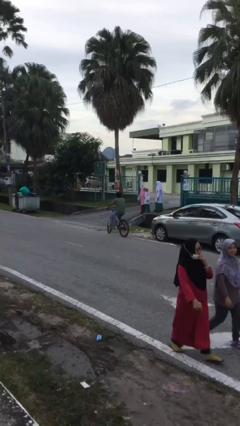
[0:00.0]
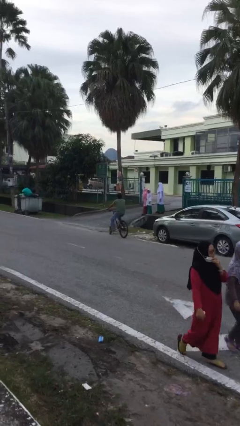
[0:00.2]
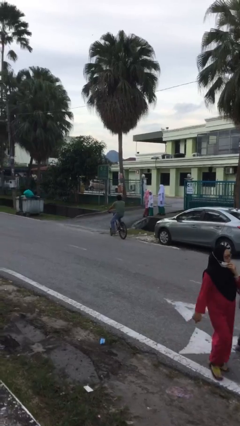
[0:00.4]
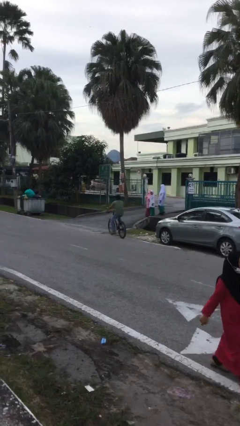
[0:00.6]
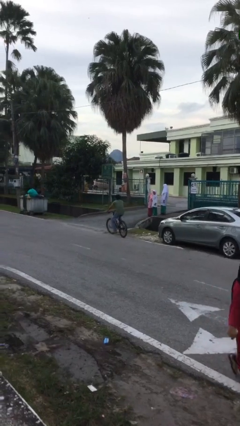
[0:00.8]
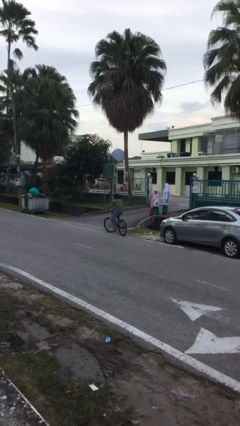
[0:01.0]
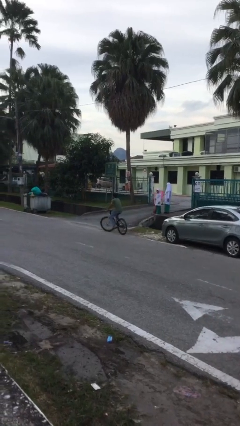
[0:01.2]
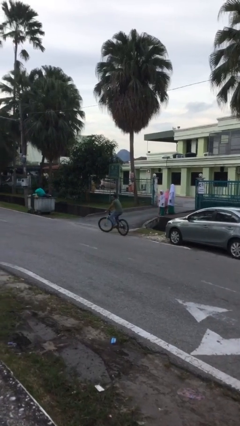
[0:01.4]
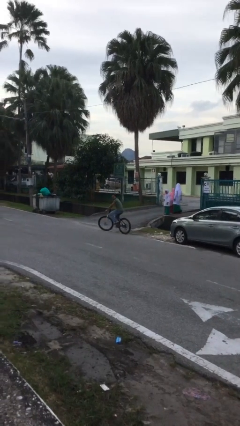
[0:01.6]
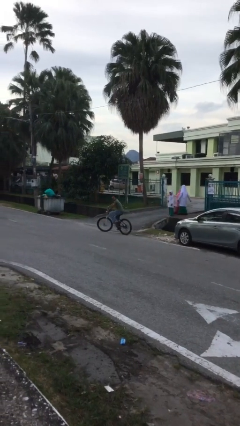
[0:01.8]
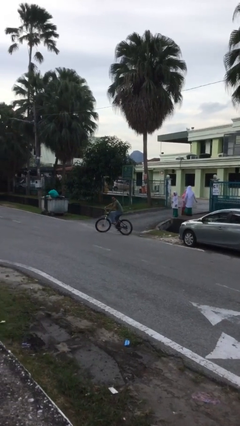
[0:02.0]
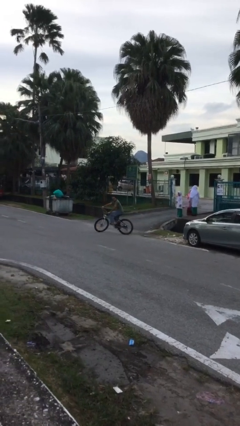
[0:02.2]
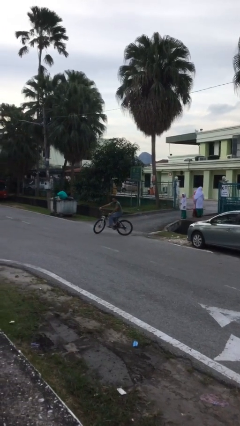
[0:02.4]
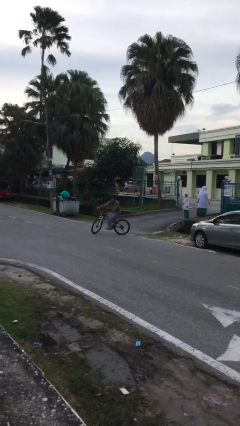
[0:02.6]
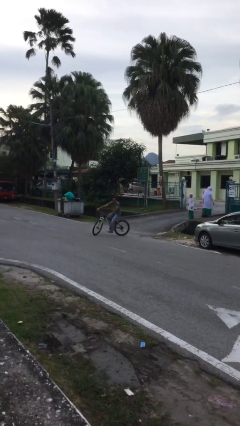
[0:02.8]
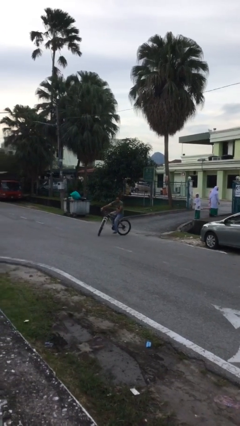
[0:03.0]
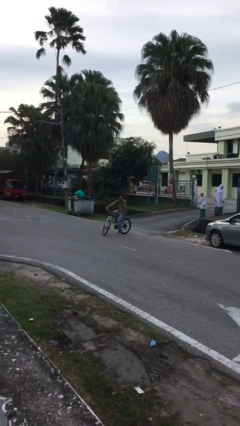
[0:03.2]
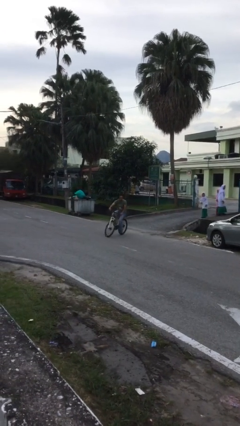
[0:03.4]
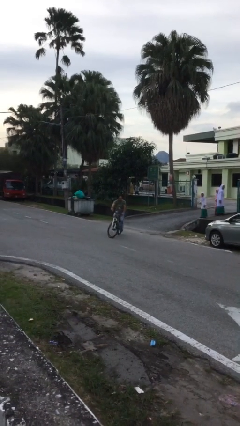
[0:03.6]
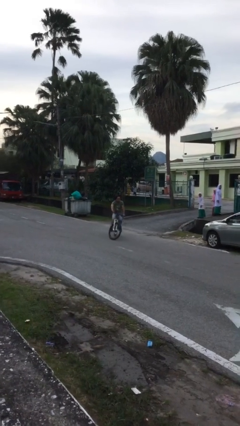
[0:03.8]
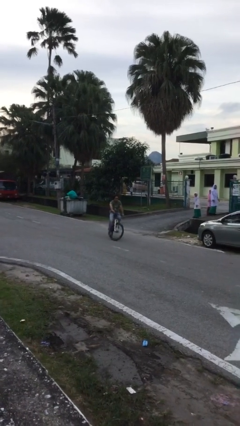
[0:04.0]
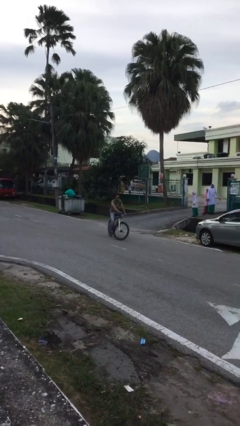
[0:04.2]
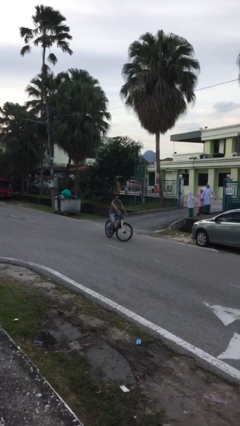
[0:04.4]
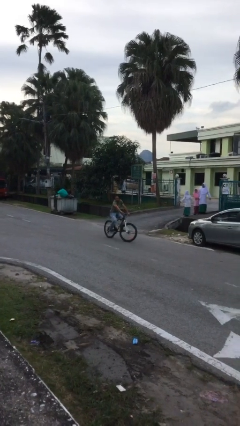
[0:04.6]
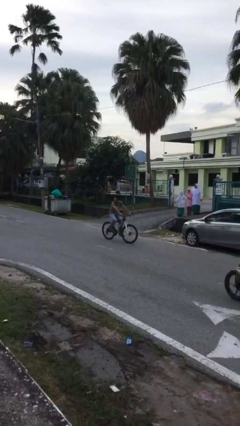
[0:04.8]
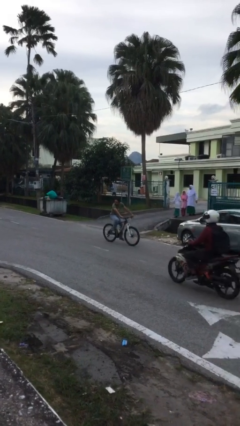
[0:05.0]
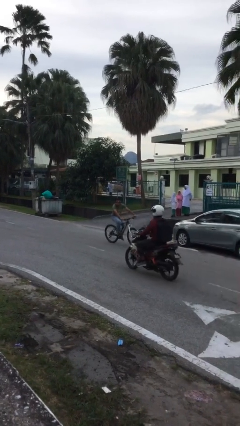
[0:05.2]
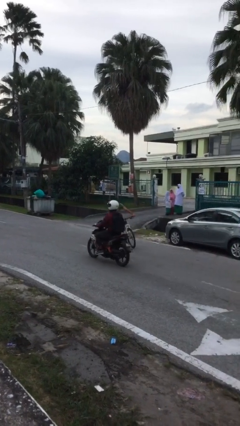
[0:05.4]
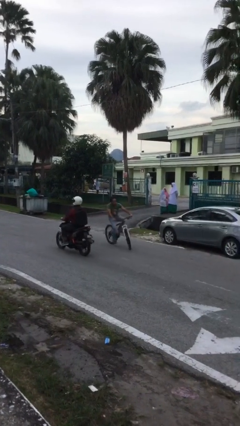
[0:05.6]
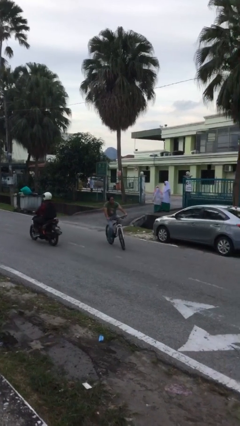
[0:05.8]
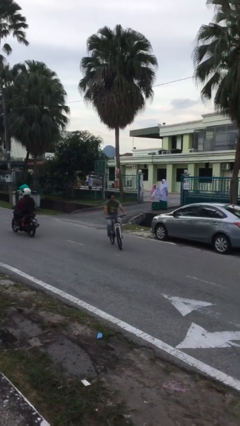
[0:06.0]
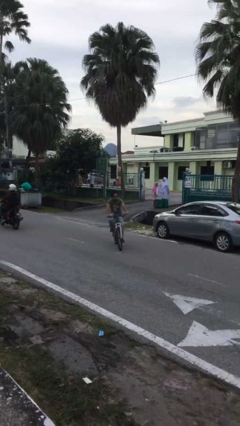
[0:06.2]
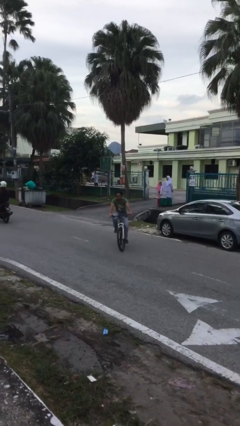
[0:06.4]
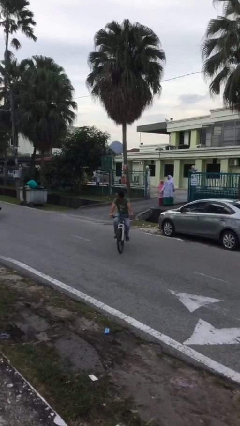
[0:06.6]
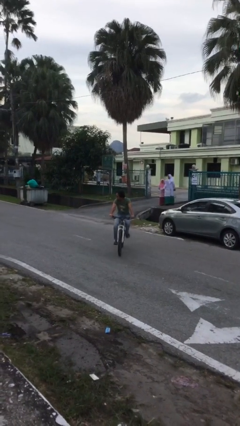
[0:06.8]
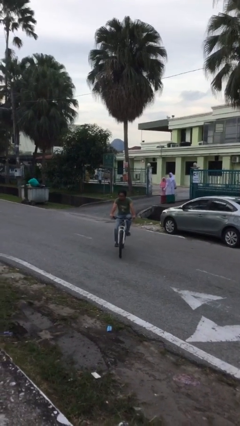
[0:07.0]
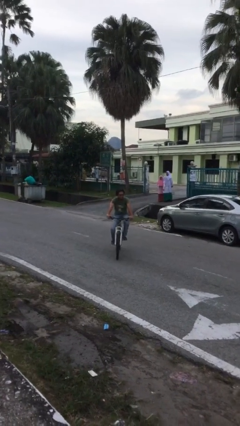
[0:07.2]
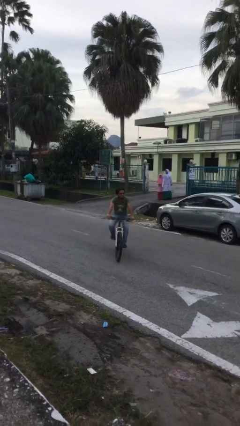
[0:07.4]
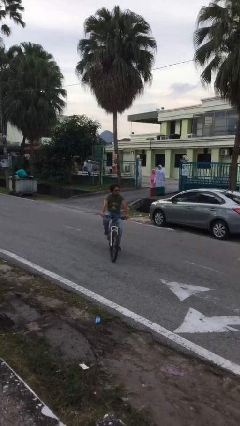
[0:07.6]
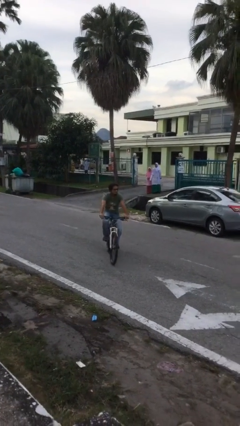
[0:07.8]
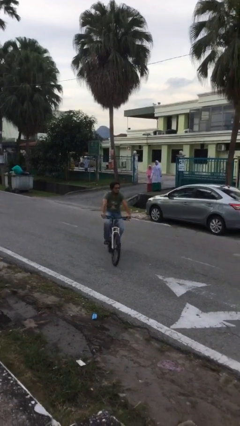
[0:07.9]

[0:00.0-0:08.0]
person rides bicycle

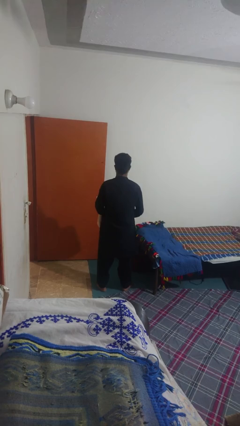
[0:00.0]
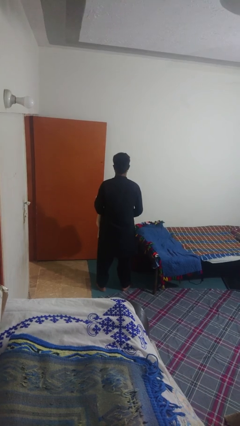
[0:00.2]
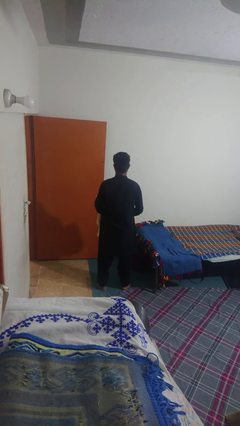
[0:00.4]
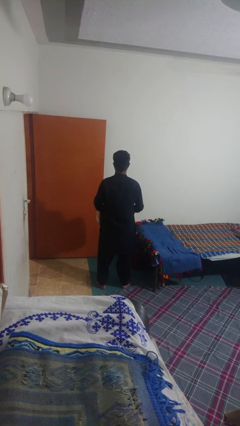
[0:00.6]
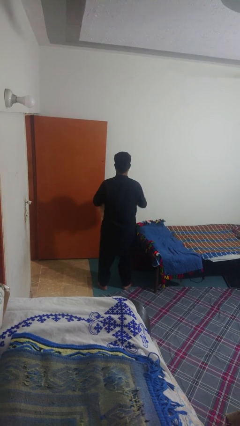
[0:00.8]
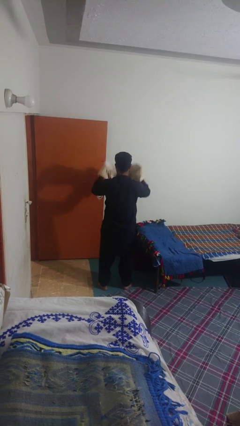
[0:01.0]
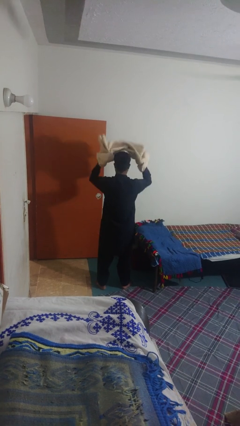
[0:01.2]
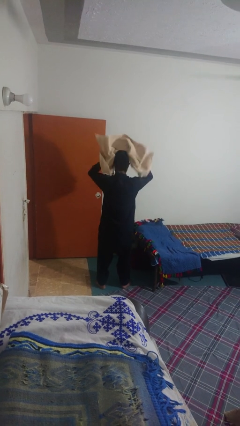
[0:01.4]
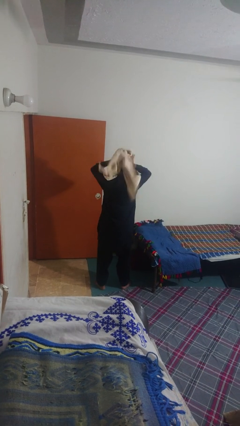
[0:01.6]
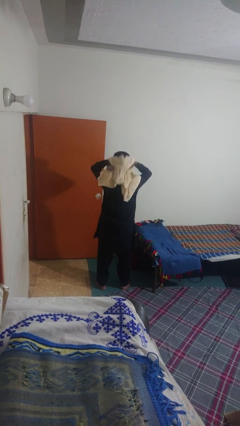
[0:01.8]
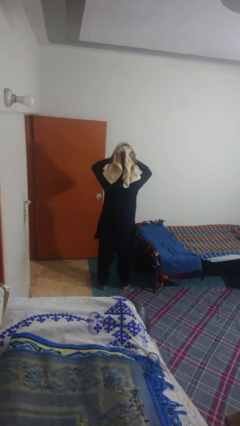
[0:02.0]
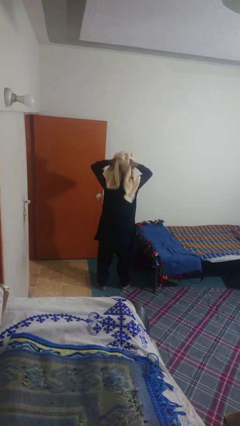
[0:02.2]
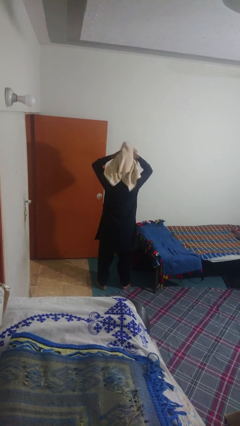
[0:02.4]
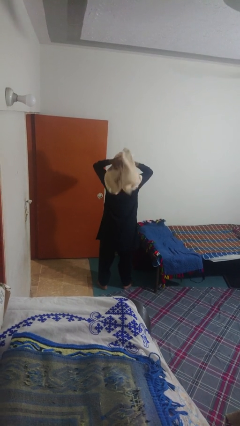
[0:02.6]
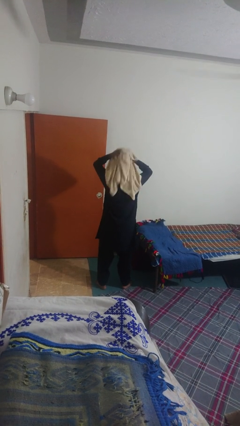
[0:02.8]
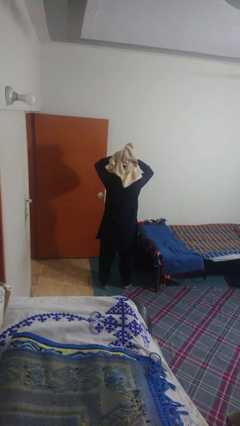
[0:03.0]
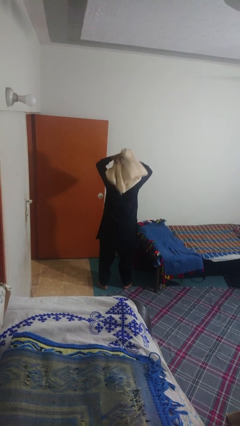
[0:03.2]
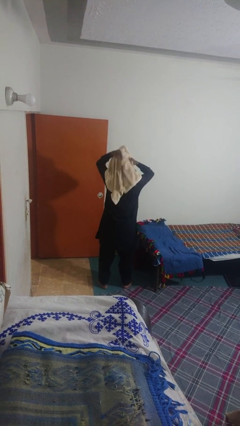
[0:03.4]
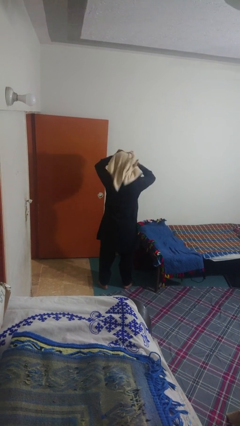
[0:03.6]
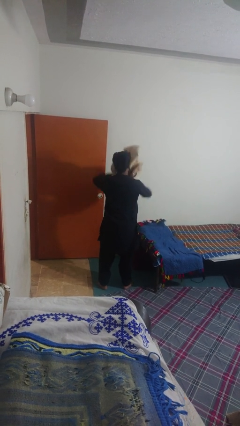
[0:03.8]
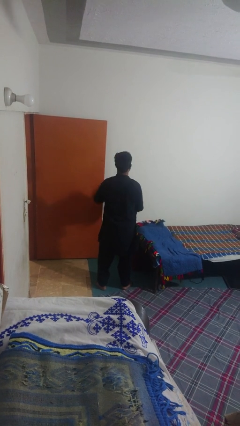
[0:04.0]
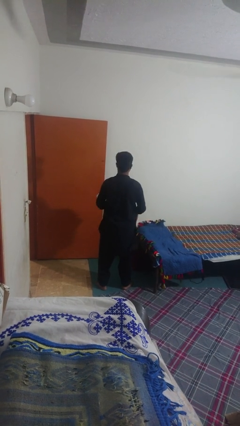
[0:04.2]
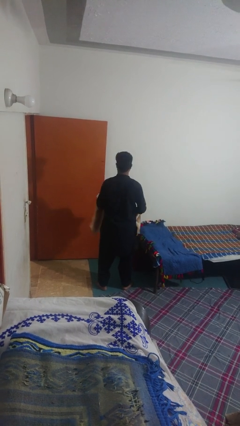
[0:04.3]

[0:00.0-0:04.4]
person dries hair with towel

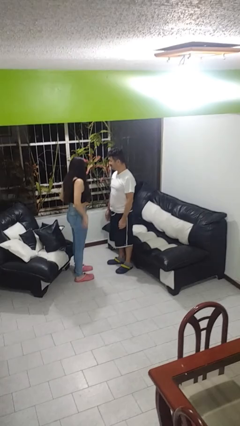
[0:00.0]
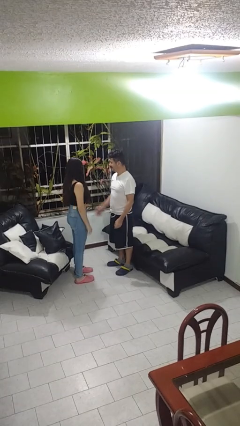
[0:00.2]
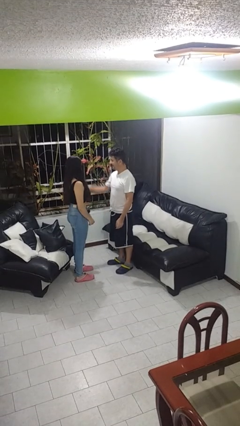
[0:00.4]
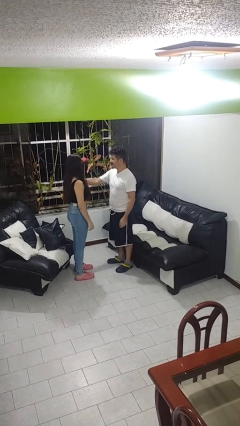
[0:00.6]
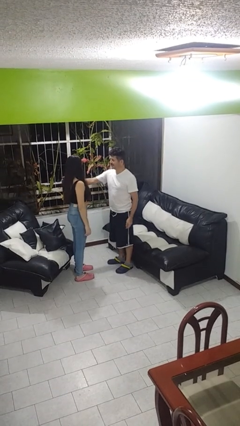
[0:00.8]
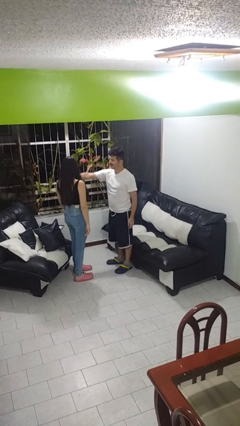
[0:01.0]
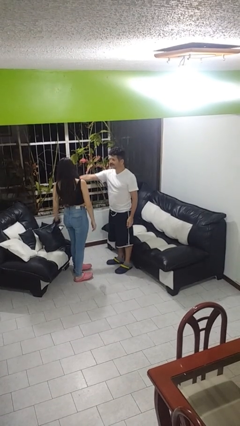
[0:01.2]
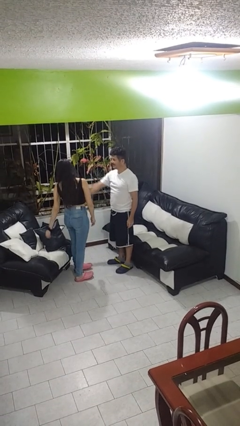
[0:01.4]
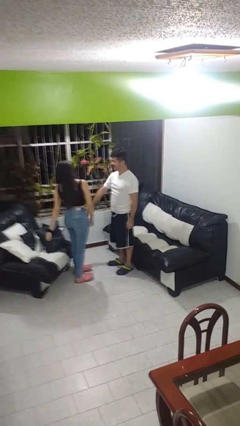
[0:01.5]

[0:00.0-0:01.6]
person shoves person

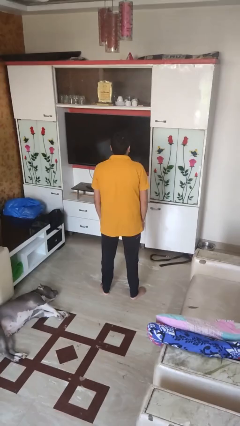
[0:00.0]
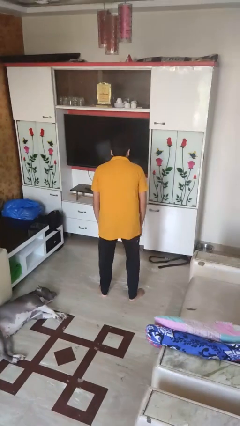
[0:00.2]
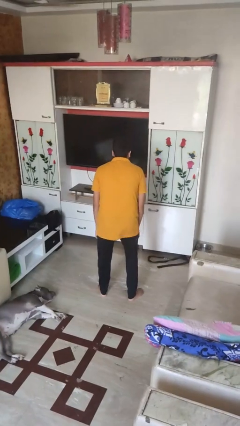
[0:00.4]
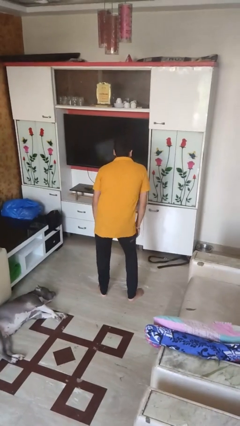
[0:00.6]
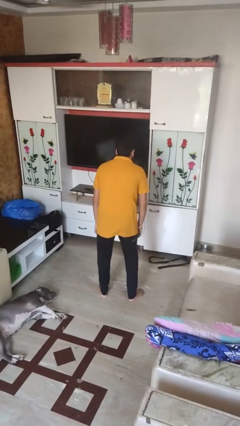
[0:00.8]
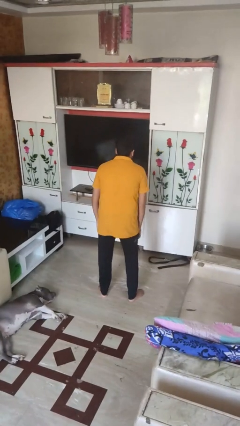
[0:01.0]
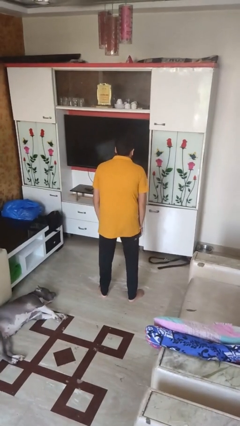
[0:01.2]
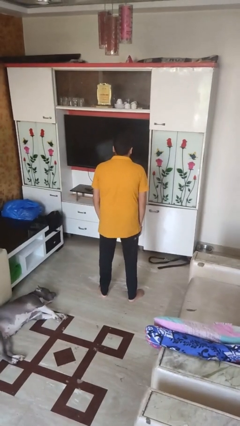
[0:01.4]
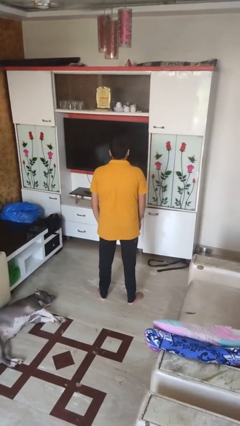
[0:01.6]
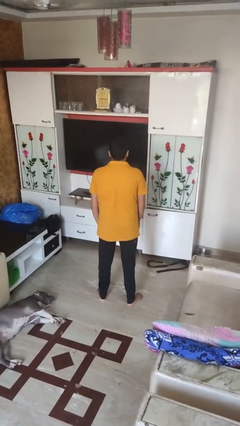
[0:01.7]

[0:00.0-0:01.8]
person wiggles hips

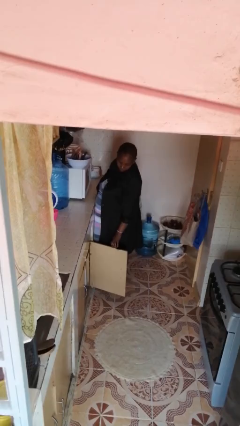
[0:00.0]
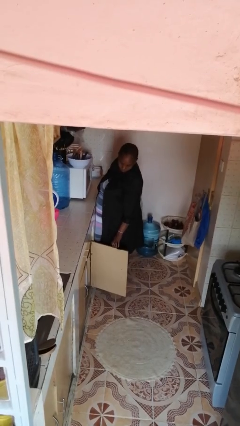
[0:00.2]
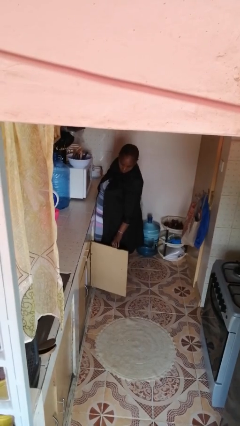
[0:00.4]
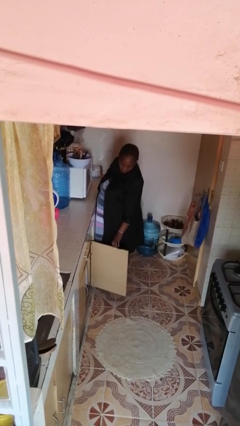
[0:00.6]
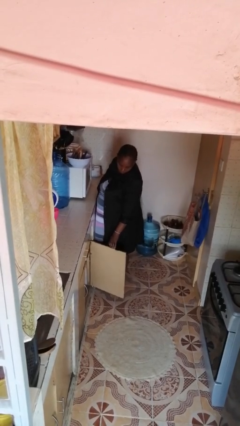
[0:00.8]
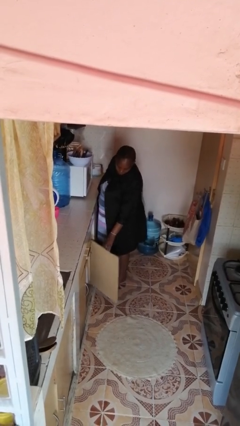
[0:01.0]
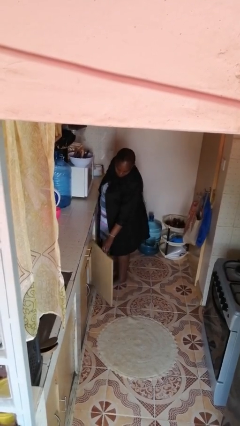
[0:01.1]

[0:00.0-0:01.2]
person closes cabinet

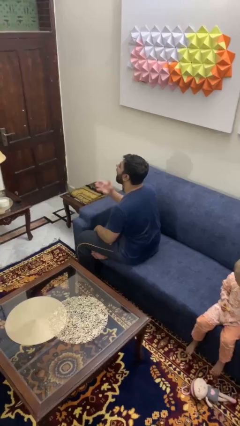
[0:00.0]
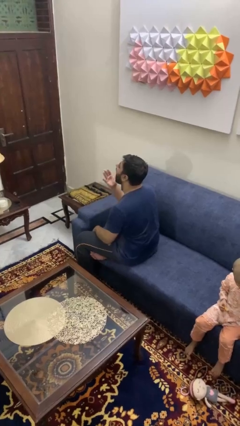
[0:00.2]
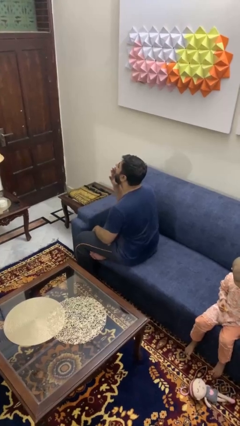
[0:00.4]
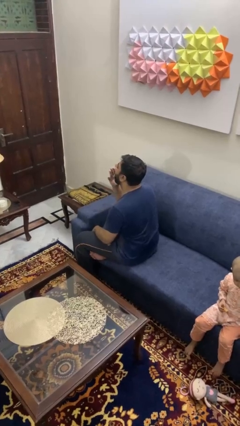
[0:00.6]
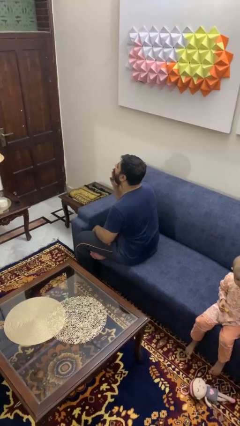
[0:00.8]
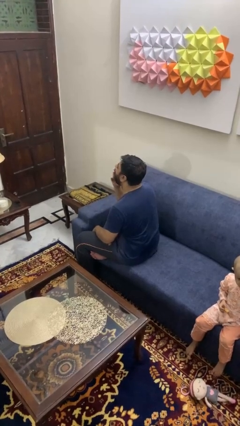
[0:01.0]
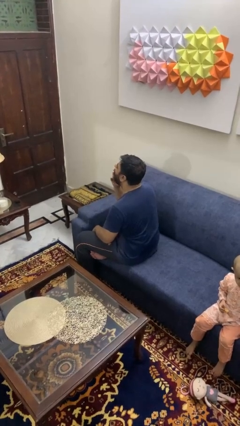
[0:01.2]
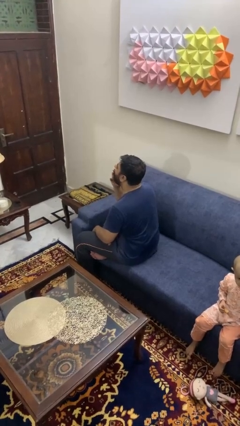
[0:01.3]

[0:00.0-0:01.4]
person yawns
